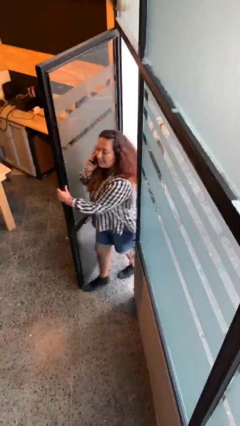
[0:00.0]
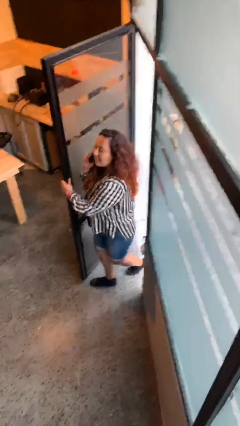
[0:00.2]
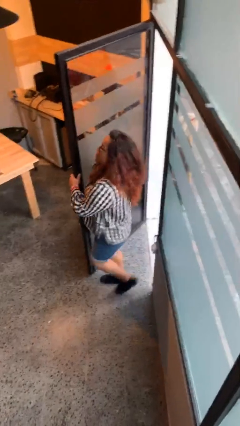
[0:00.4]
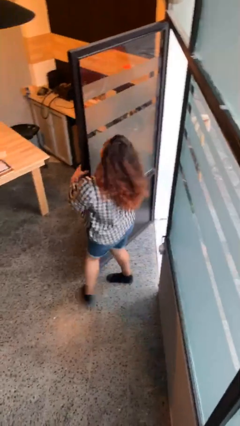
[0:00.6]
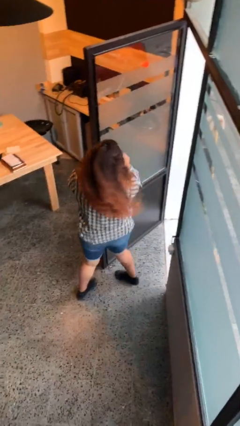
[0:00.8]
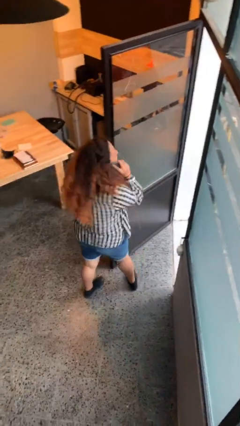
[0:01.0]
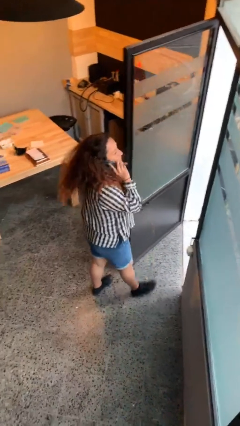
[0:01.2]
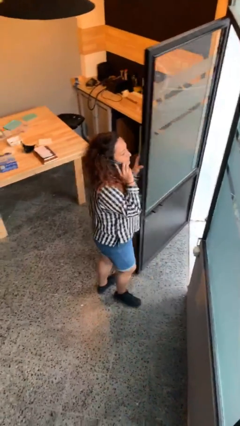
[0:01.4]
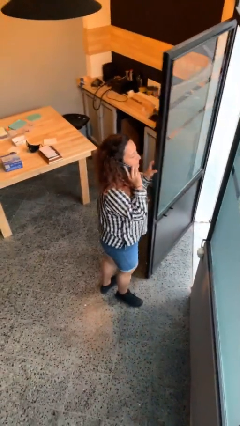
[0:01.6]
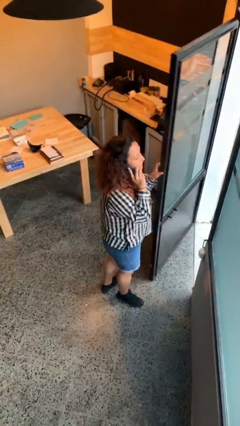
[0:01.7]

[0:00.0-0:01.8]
person enters scene through structure

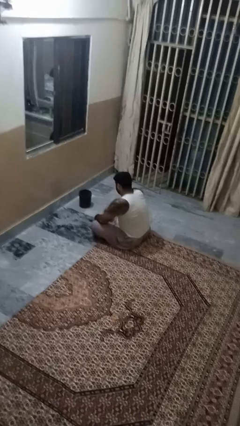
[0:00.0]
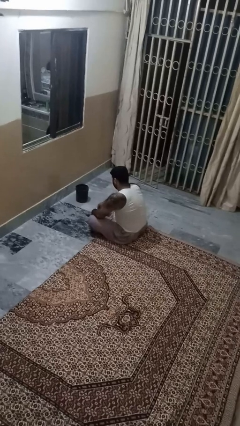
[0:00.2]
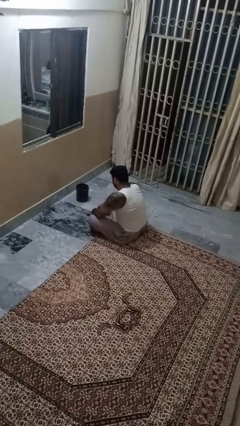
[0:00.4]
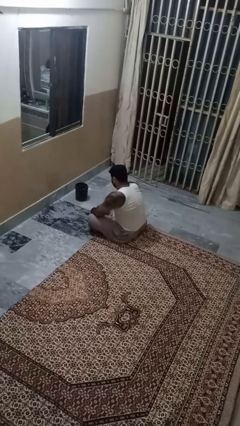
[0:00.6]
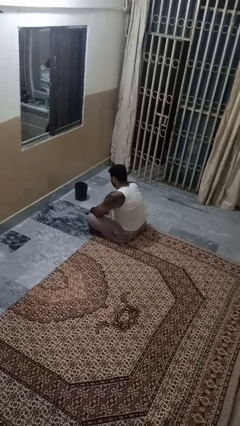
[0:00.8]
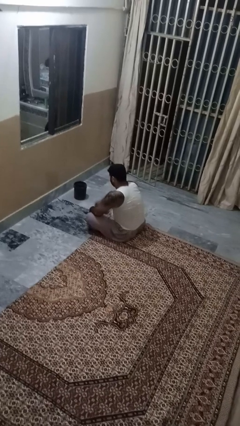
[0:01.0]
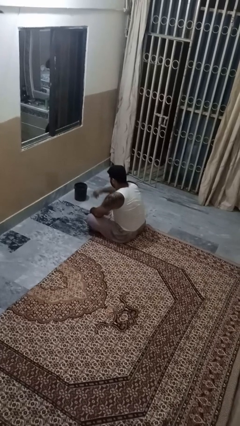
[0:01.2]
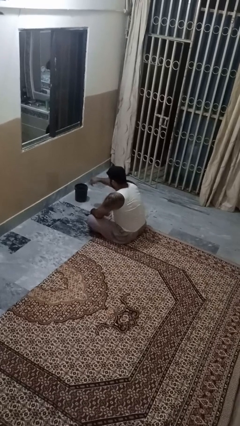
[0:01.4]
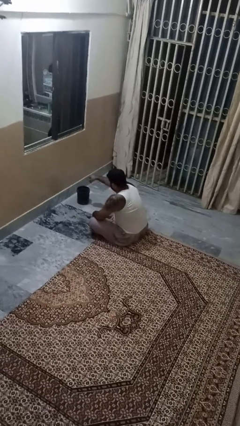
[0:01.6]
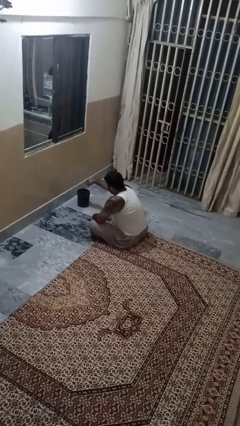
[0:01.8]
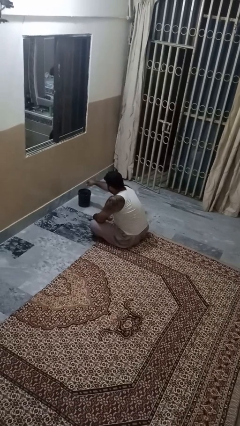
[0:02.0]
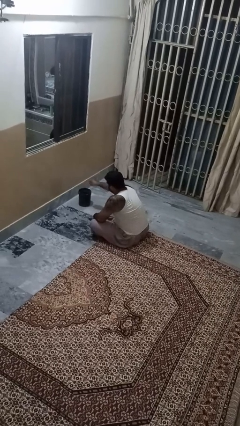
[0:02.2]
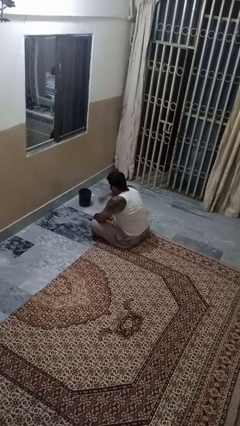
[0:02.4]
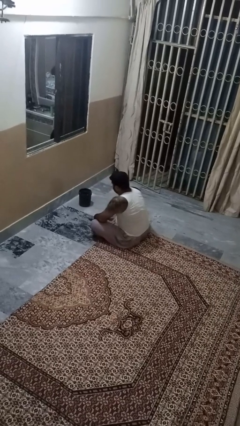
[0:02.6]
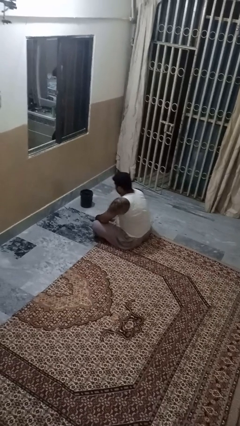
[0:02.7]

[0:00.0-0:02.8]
person discards trash

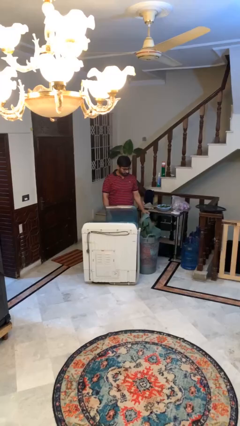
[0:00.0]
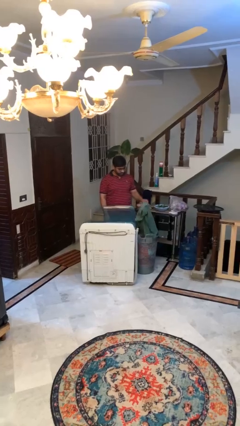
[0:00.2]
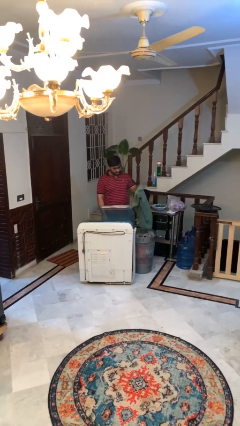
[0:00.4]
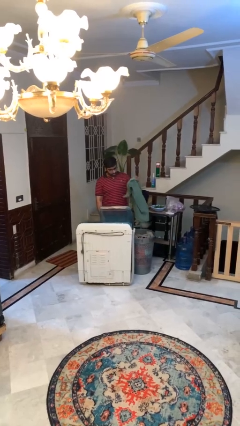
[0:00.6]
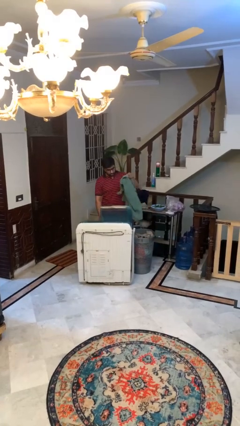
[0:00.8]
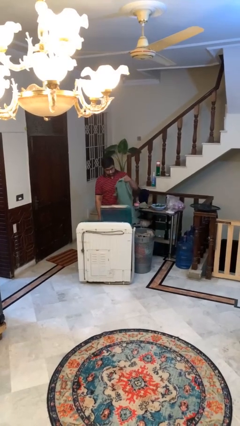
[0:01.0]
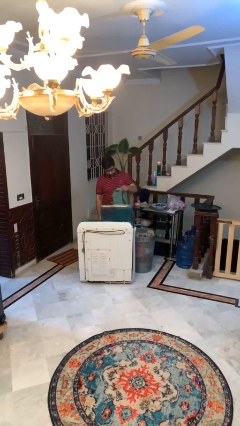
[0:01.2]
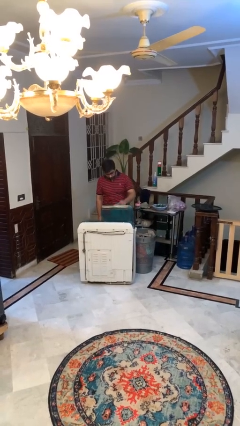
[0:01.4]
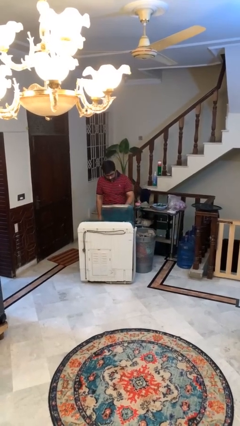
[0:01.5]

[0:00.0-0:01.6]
person loads clotheswasher

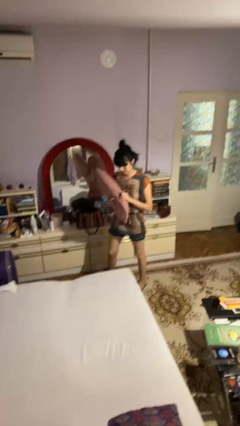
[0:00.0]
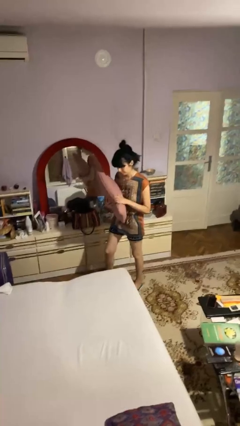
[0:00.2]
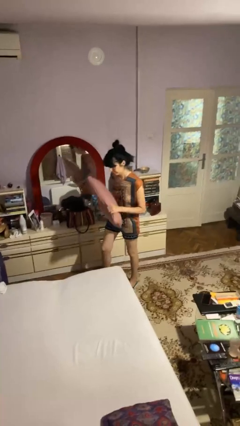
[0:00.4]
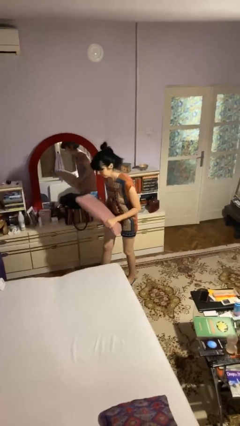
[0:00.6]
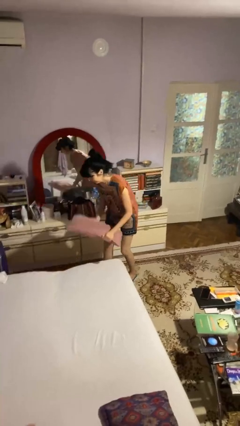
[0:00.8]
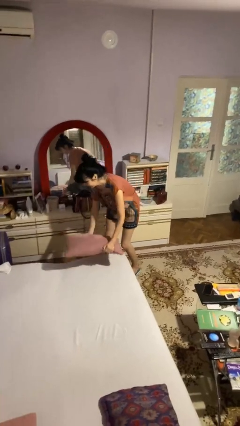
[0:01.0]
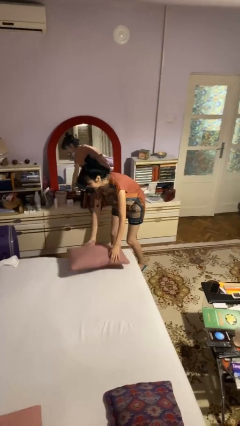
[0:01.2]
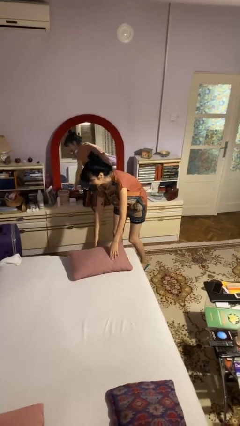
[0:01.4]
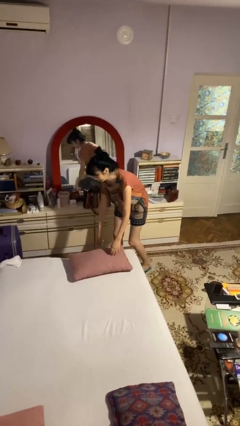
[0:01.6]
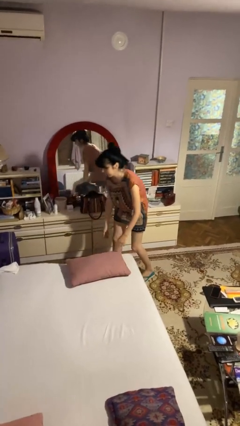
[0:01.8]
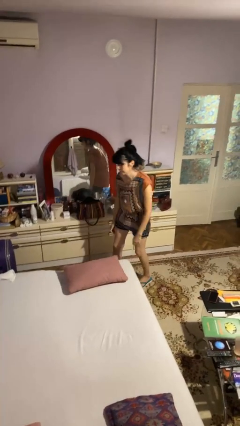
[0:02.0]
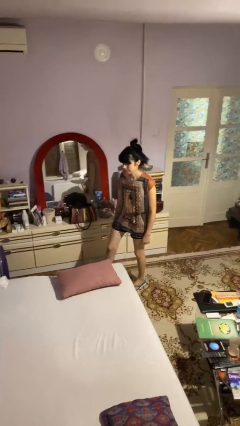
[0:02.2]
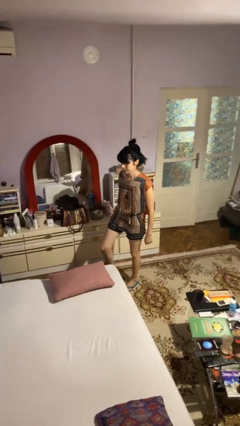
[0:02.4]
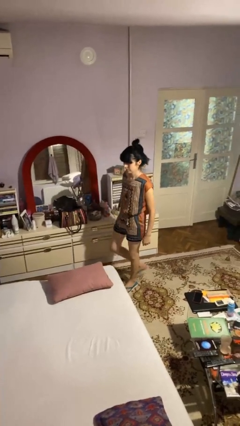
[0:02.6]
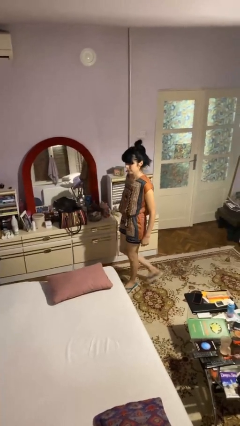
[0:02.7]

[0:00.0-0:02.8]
person puts down object on bed

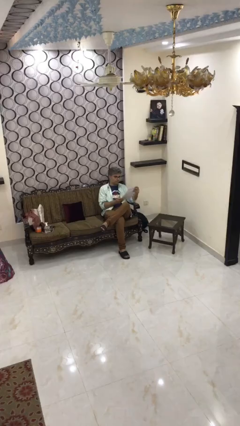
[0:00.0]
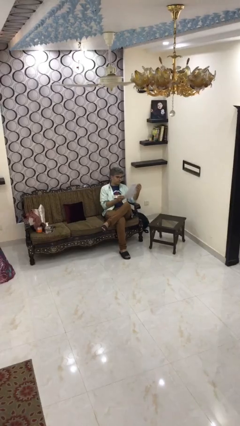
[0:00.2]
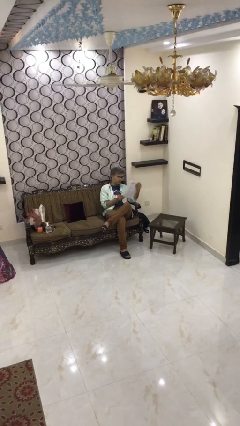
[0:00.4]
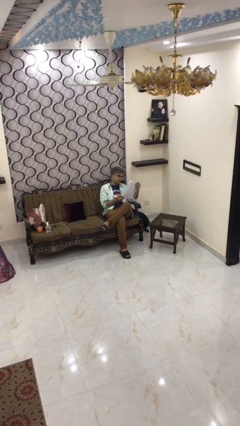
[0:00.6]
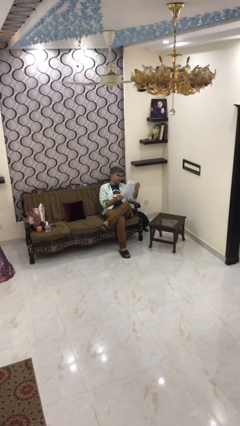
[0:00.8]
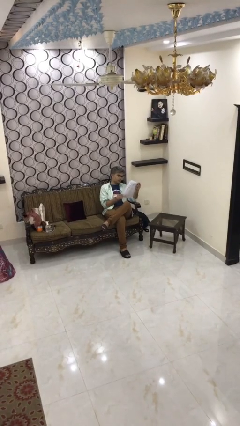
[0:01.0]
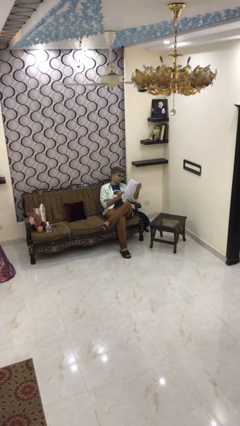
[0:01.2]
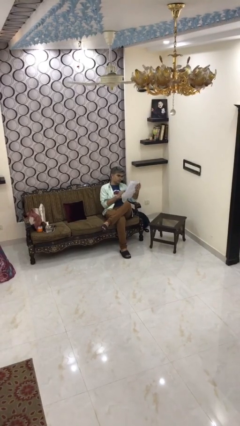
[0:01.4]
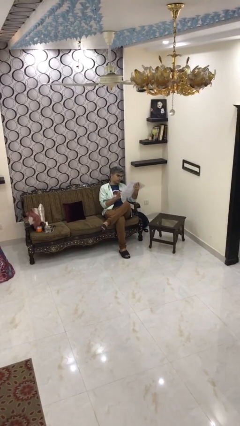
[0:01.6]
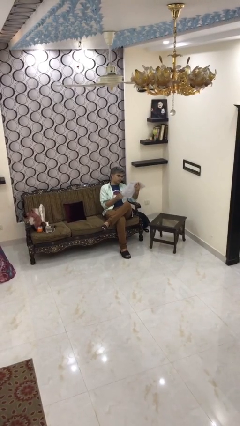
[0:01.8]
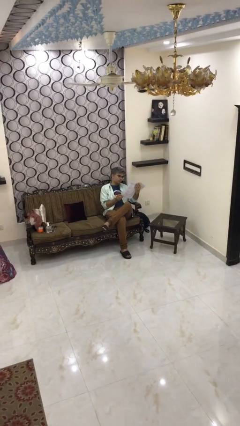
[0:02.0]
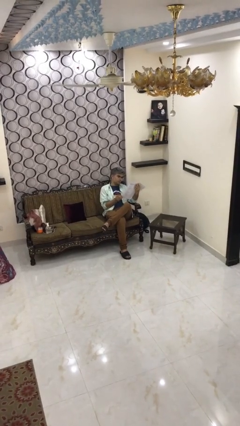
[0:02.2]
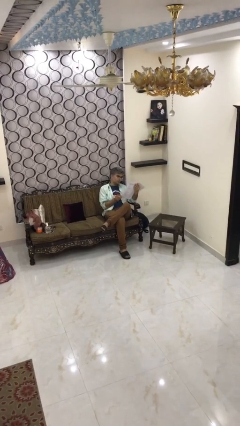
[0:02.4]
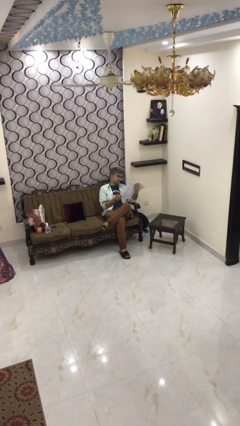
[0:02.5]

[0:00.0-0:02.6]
person reads document

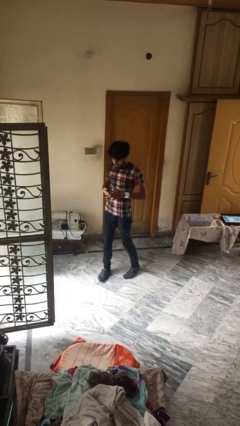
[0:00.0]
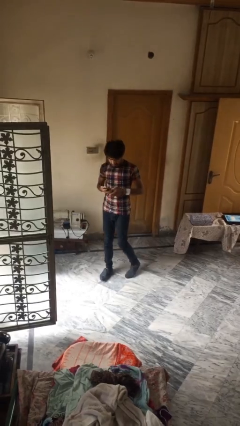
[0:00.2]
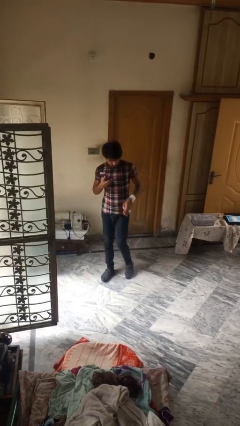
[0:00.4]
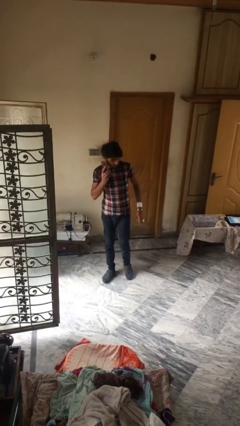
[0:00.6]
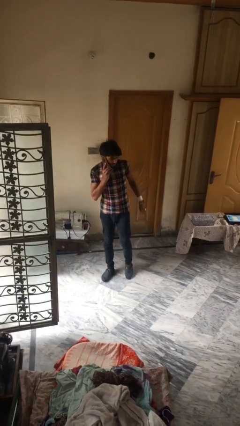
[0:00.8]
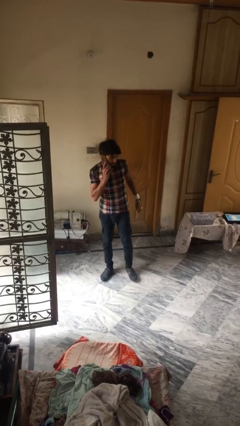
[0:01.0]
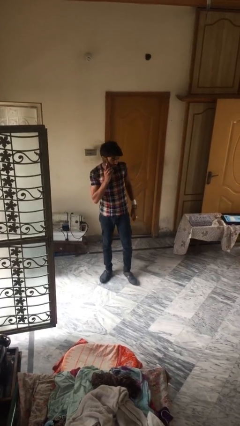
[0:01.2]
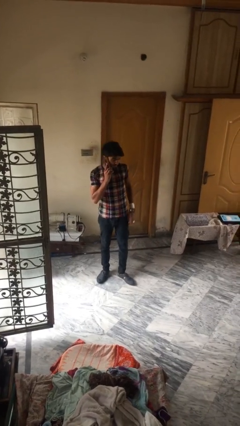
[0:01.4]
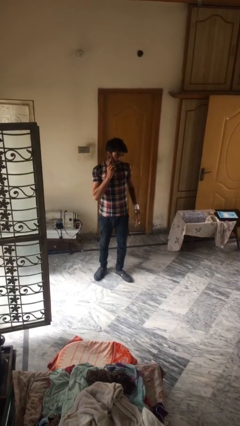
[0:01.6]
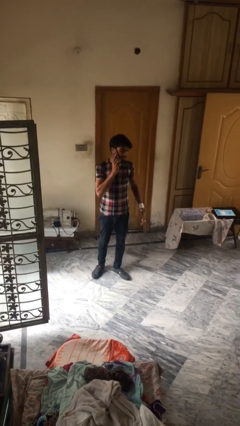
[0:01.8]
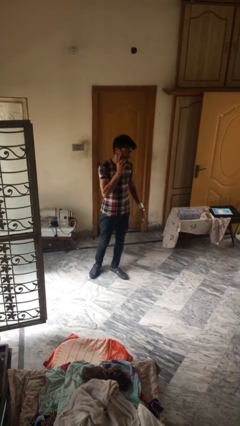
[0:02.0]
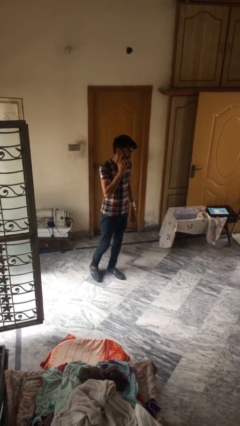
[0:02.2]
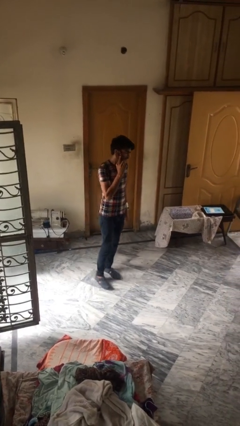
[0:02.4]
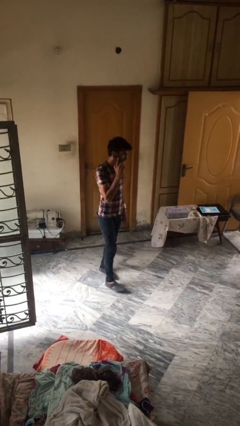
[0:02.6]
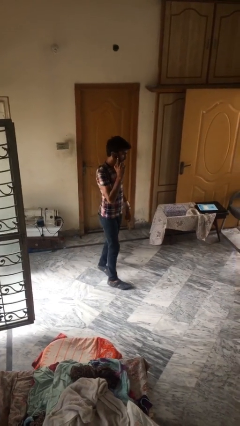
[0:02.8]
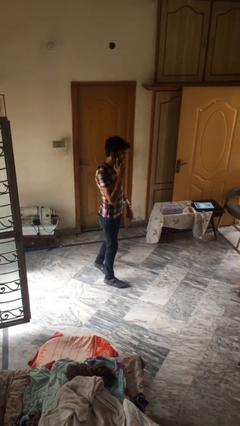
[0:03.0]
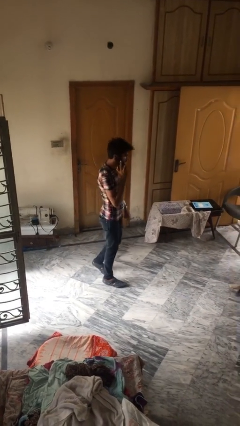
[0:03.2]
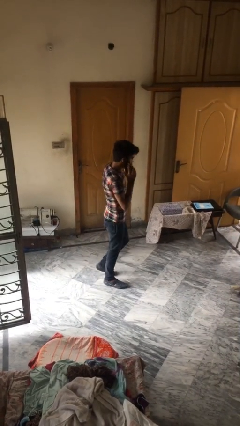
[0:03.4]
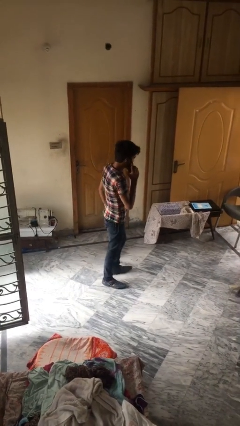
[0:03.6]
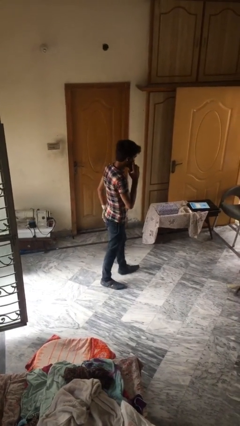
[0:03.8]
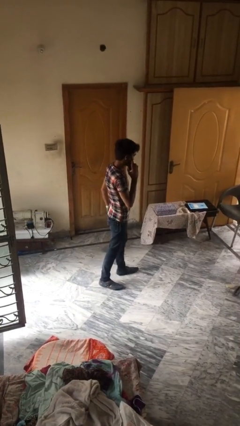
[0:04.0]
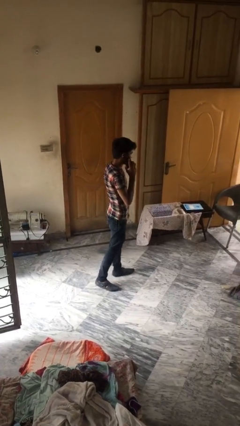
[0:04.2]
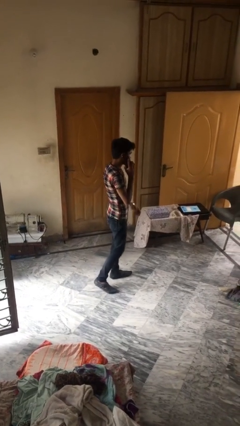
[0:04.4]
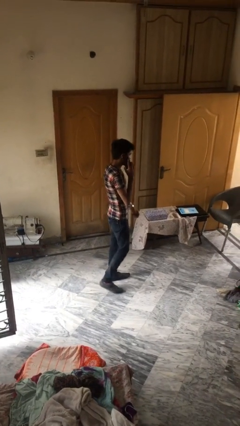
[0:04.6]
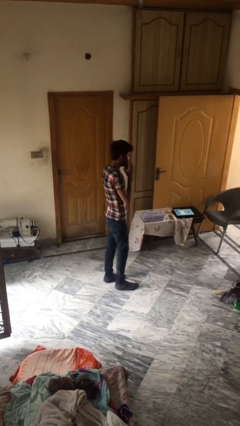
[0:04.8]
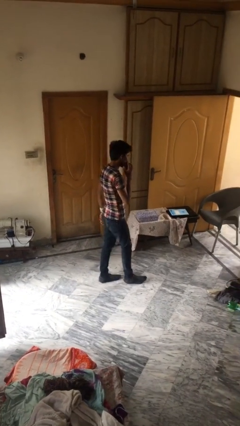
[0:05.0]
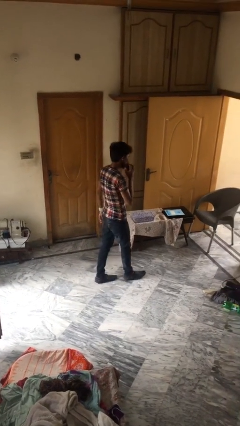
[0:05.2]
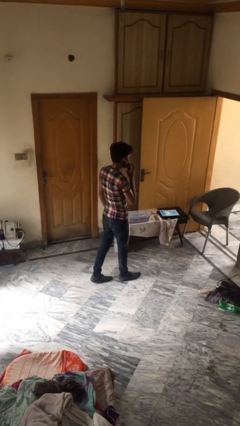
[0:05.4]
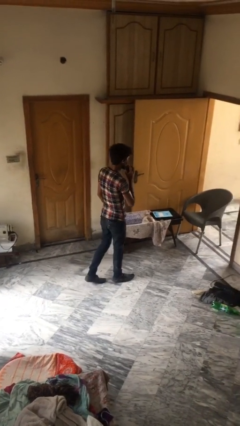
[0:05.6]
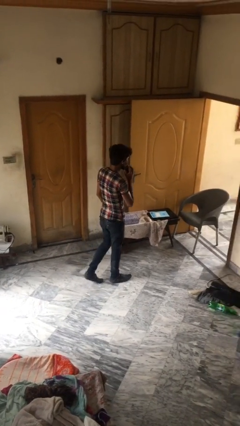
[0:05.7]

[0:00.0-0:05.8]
person talks on phone
